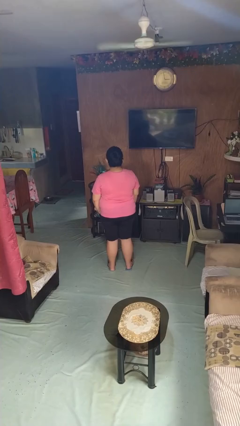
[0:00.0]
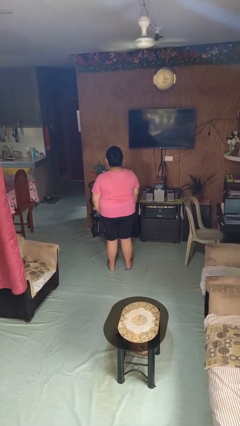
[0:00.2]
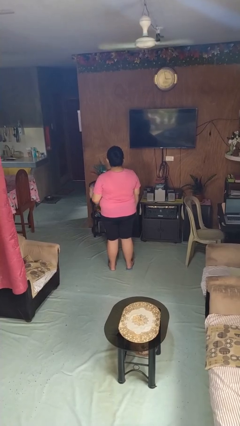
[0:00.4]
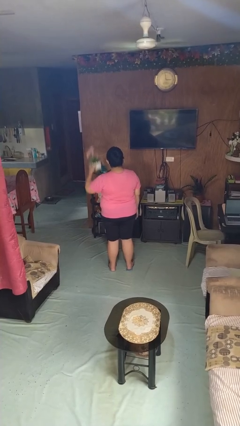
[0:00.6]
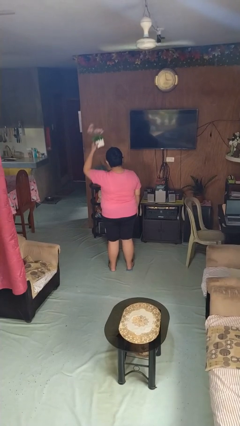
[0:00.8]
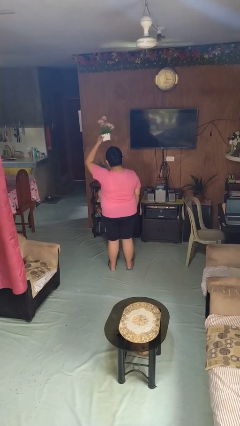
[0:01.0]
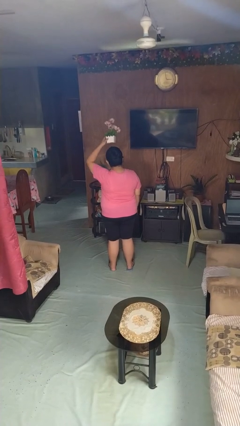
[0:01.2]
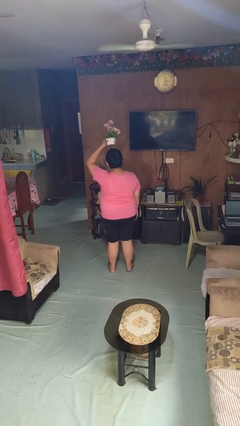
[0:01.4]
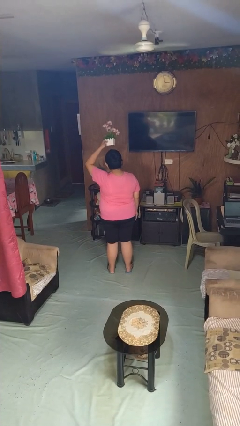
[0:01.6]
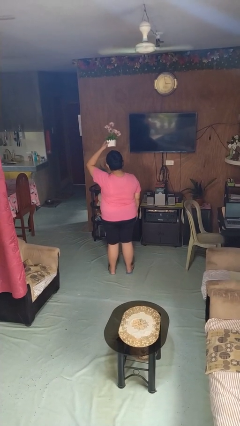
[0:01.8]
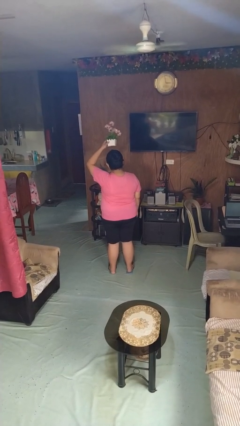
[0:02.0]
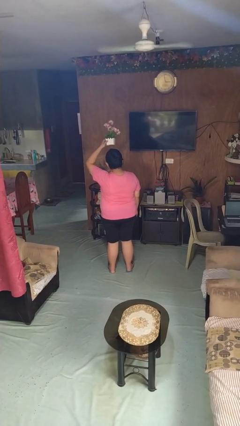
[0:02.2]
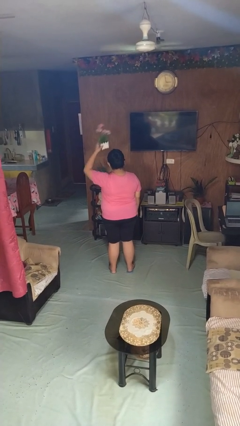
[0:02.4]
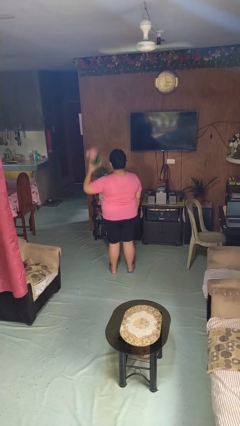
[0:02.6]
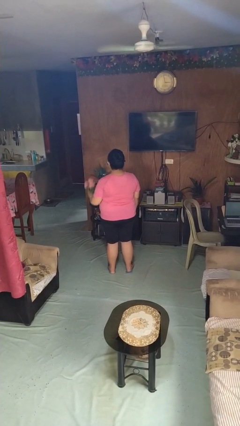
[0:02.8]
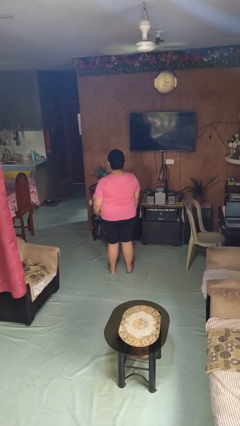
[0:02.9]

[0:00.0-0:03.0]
person holds object above head

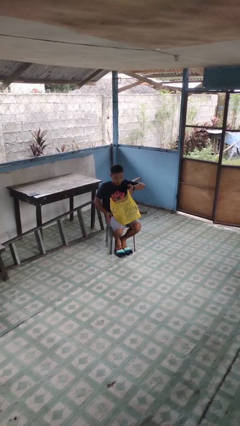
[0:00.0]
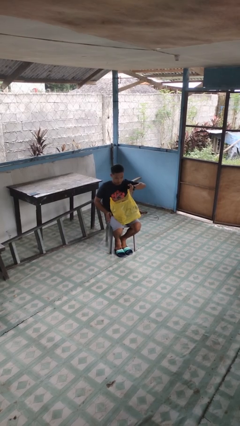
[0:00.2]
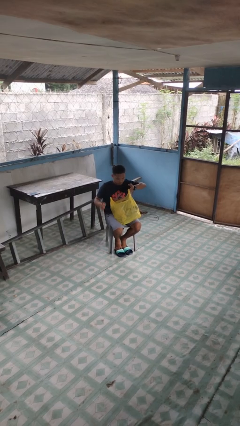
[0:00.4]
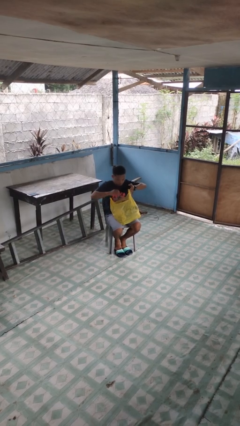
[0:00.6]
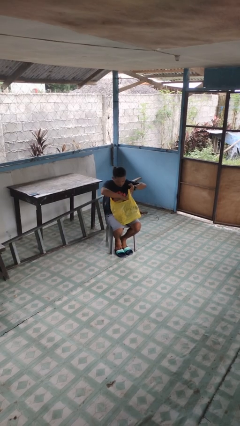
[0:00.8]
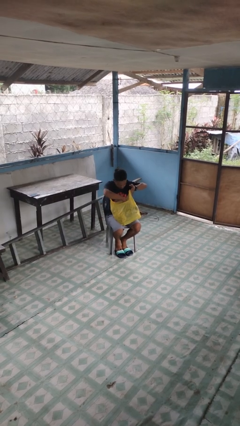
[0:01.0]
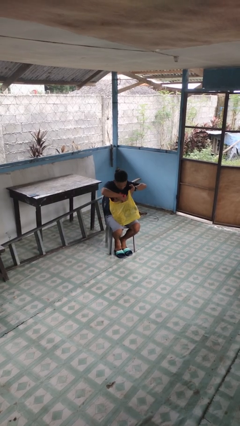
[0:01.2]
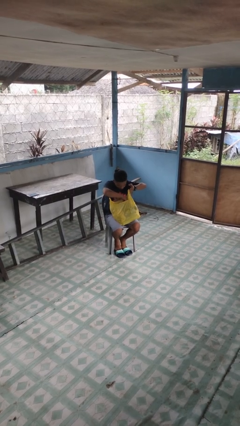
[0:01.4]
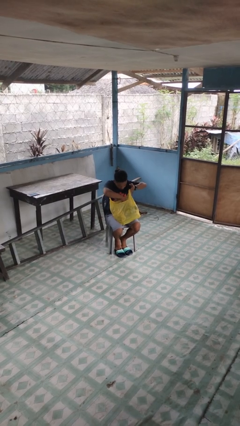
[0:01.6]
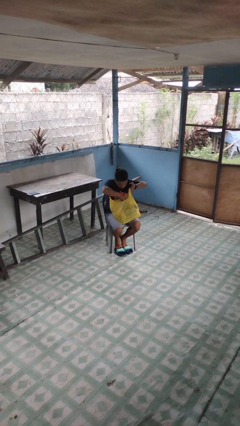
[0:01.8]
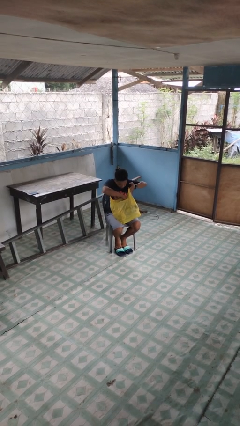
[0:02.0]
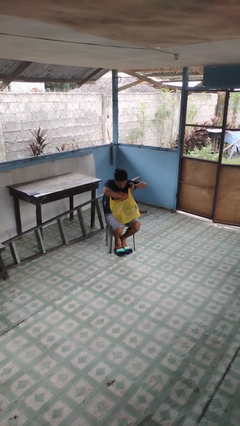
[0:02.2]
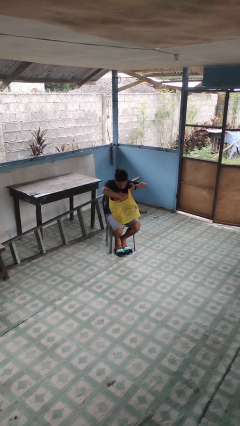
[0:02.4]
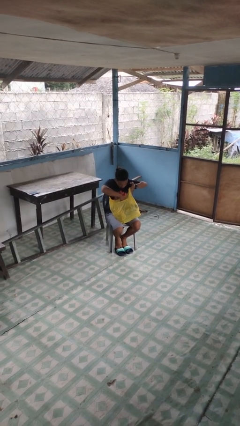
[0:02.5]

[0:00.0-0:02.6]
person searches in bag

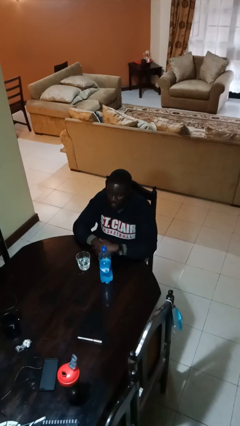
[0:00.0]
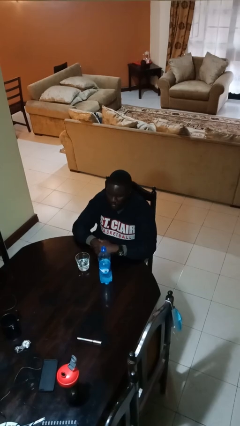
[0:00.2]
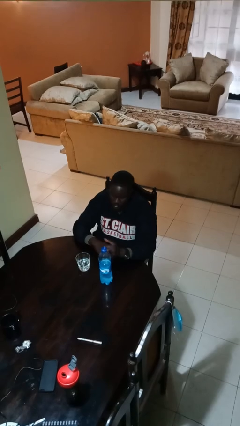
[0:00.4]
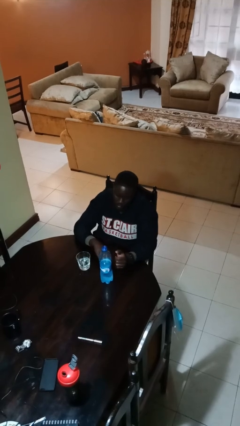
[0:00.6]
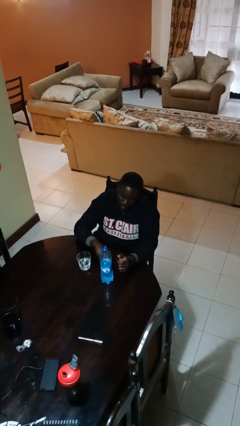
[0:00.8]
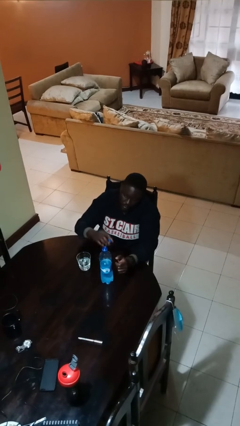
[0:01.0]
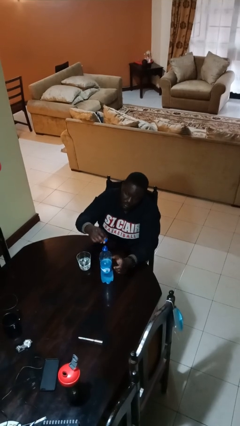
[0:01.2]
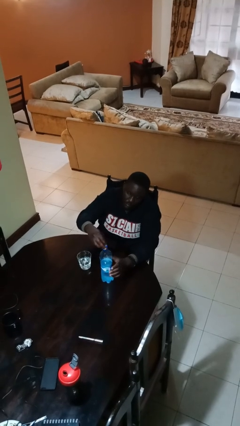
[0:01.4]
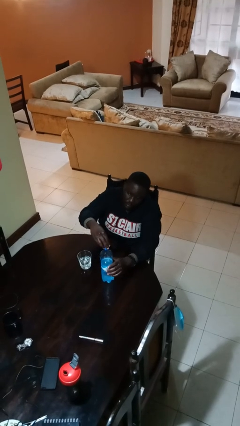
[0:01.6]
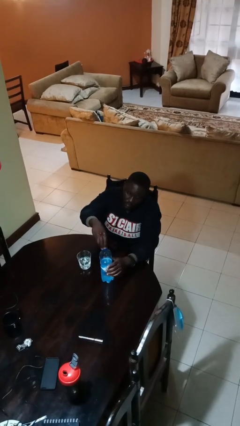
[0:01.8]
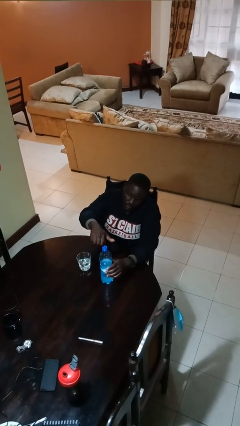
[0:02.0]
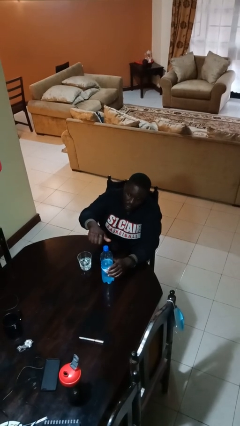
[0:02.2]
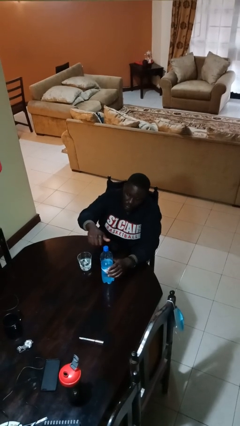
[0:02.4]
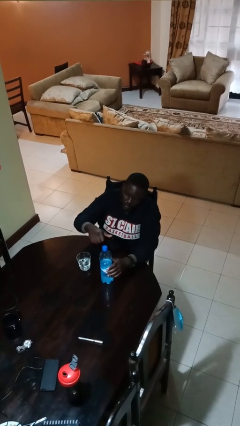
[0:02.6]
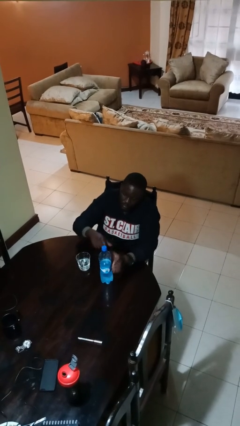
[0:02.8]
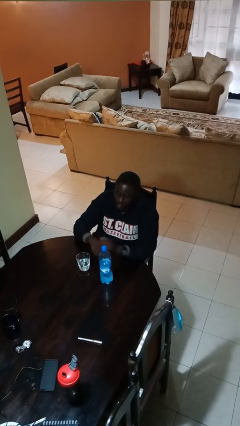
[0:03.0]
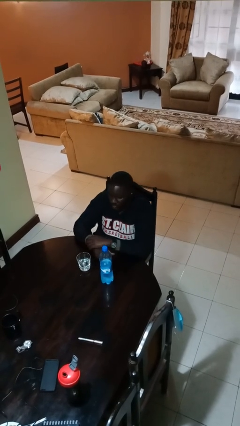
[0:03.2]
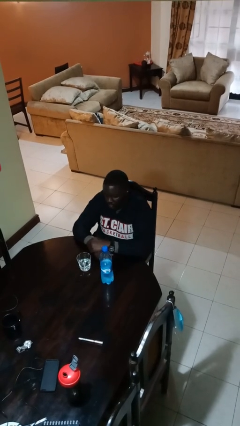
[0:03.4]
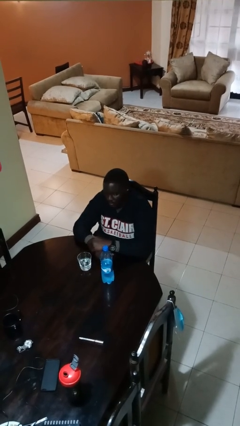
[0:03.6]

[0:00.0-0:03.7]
person screws lid to bottle

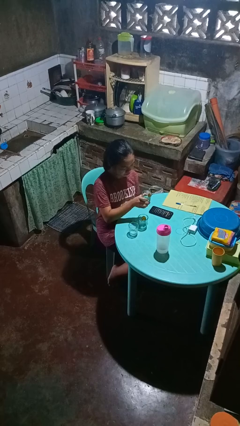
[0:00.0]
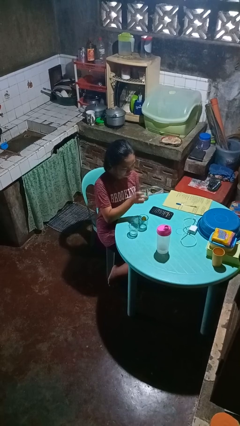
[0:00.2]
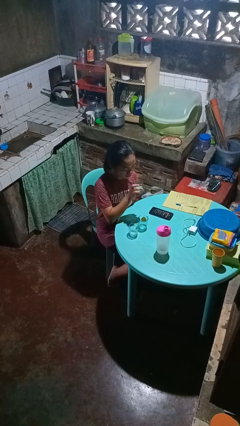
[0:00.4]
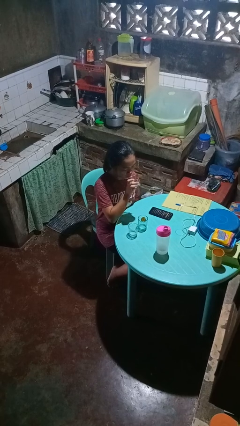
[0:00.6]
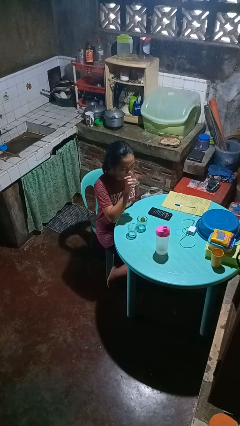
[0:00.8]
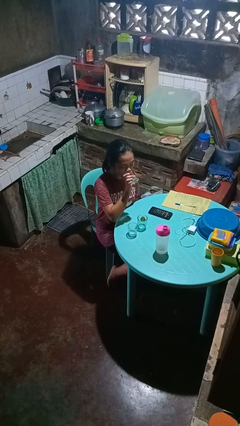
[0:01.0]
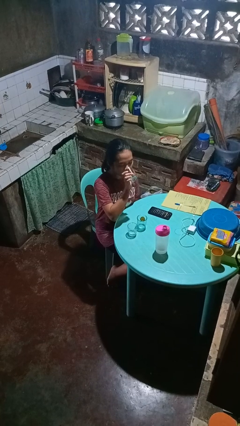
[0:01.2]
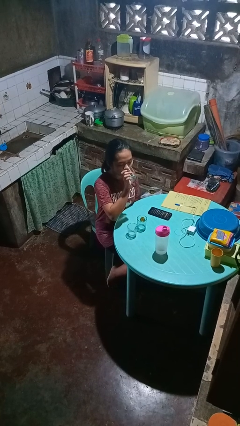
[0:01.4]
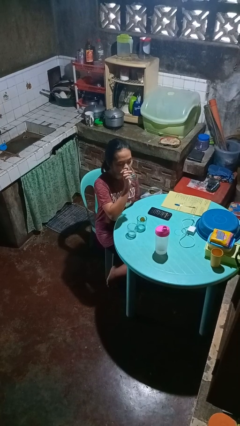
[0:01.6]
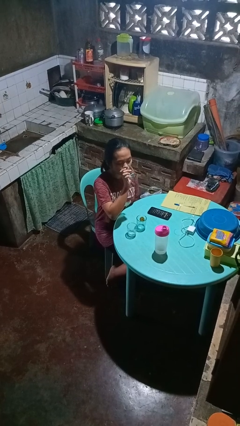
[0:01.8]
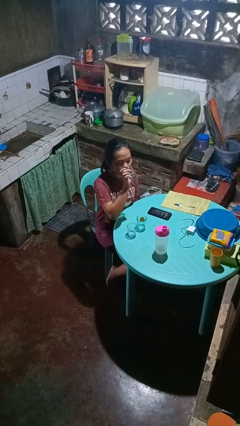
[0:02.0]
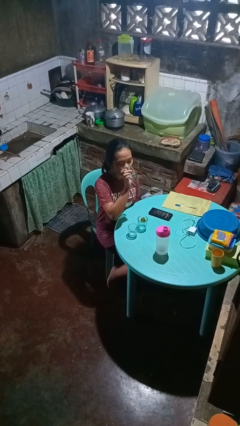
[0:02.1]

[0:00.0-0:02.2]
person drinks from shotglass

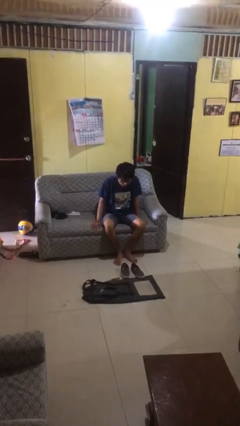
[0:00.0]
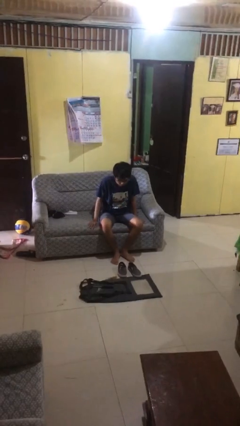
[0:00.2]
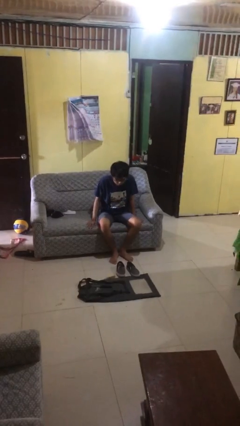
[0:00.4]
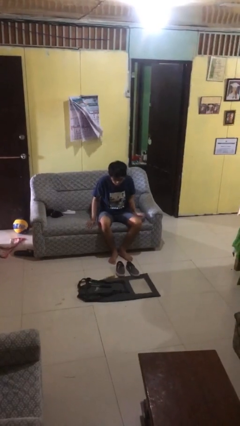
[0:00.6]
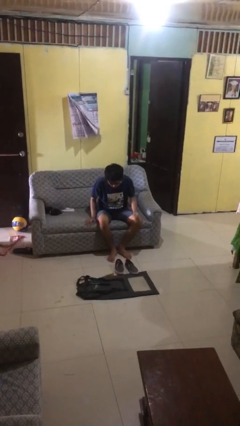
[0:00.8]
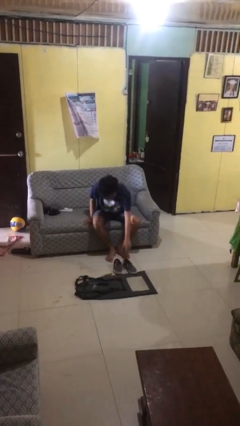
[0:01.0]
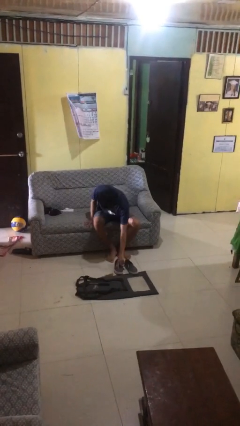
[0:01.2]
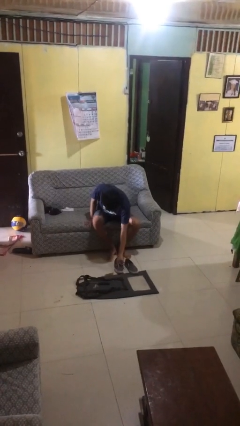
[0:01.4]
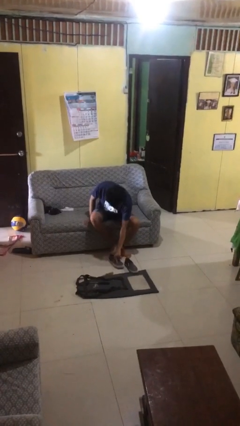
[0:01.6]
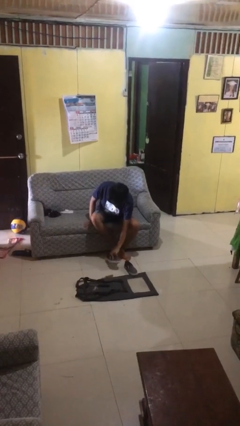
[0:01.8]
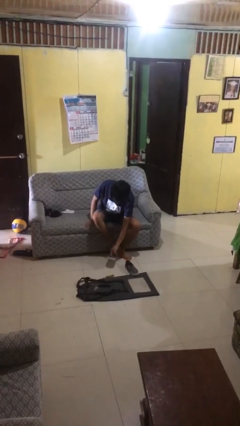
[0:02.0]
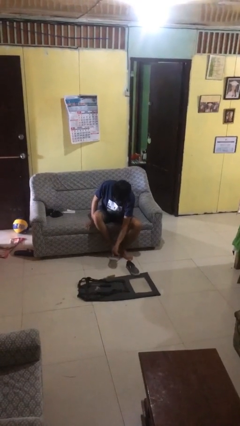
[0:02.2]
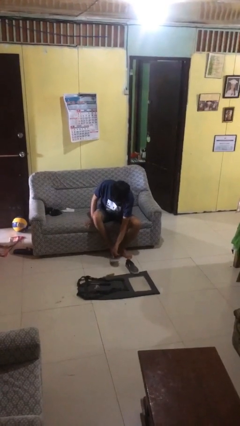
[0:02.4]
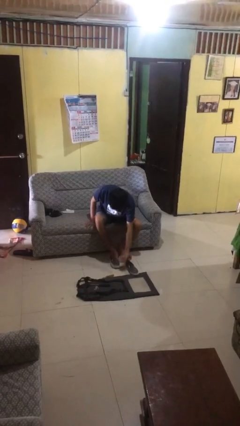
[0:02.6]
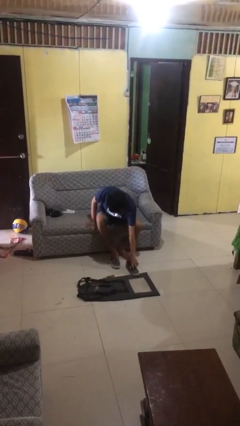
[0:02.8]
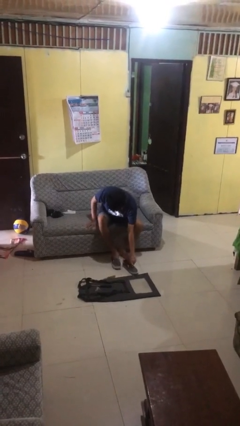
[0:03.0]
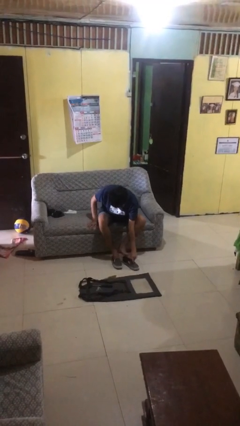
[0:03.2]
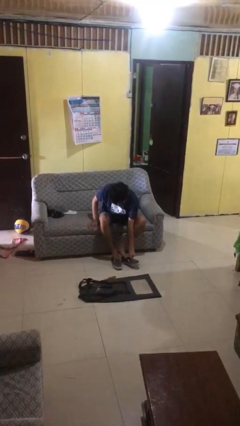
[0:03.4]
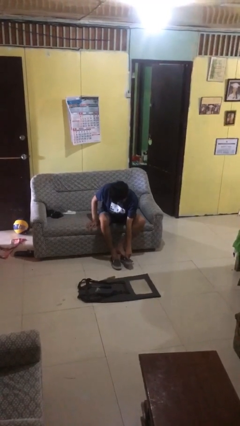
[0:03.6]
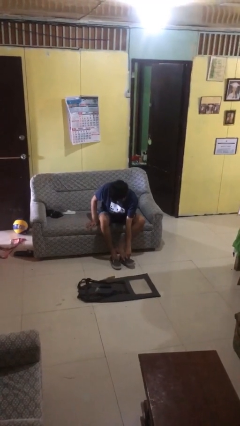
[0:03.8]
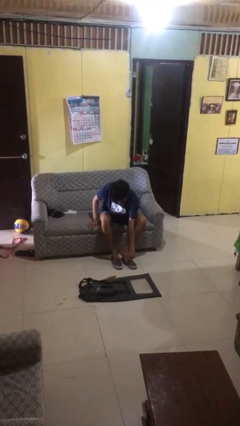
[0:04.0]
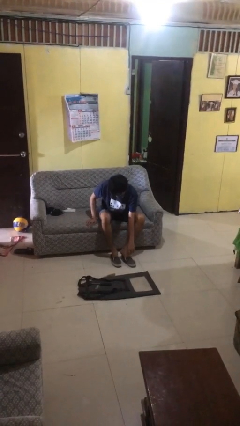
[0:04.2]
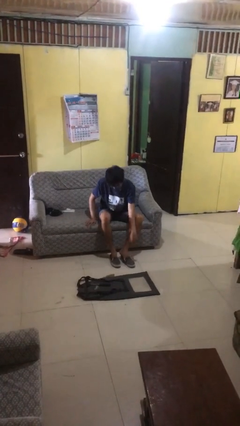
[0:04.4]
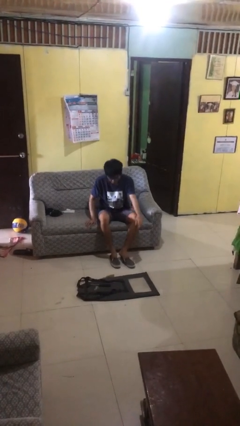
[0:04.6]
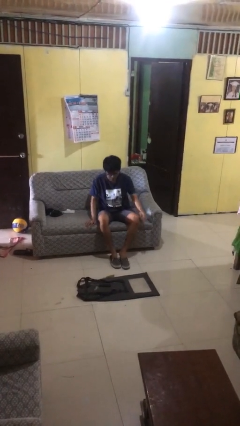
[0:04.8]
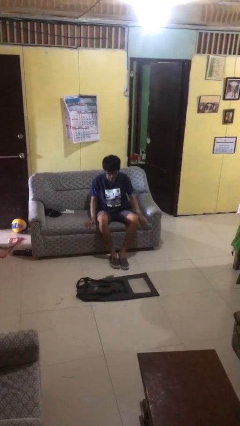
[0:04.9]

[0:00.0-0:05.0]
person puts on shoes

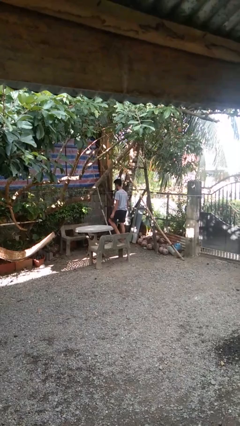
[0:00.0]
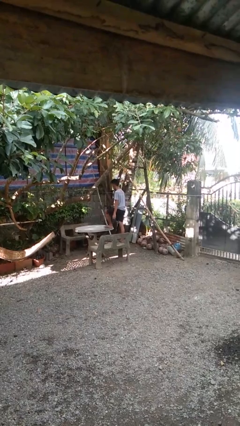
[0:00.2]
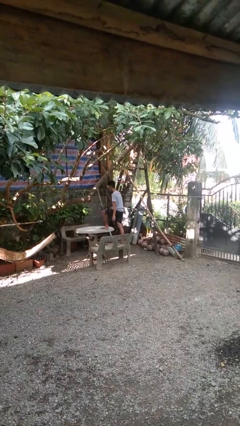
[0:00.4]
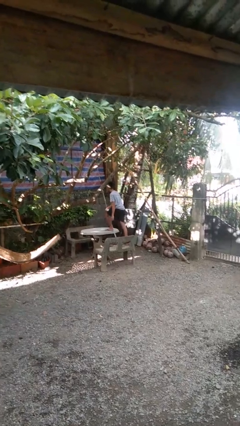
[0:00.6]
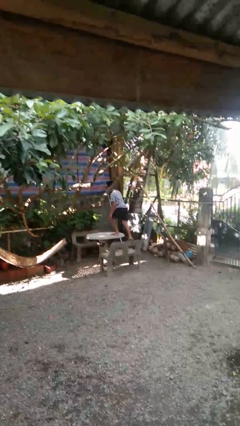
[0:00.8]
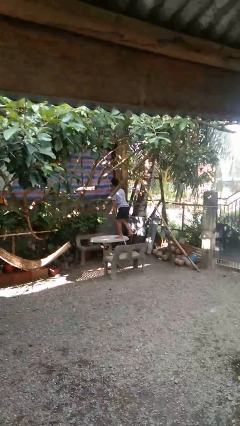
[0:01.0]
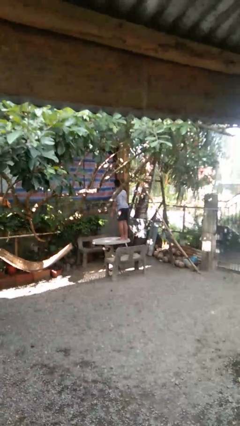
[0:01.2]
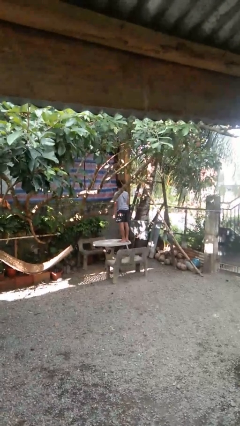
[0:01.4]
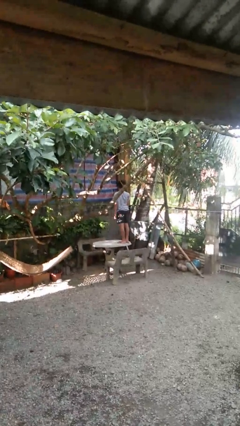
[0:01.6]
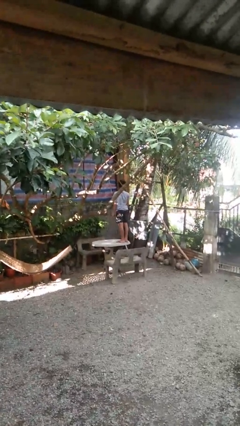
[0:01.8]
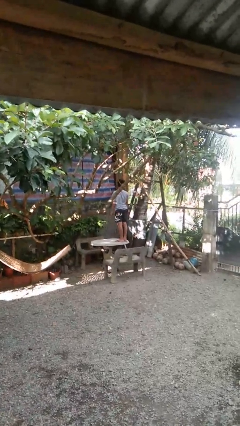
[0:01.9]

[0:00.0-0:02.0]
person climbs on table
